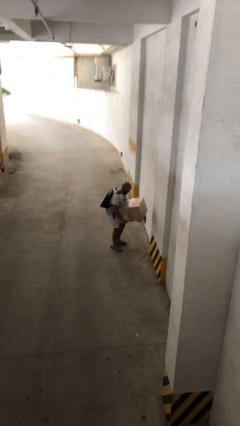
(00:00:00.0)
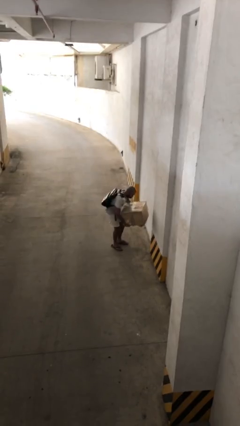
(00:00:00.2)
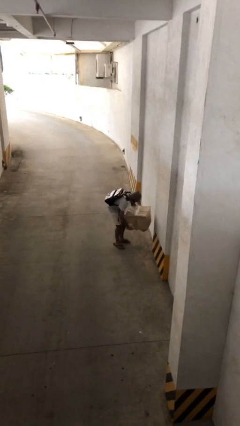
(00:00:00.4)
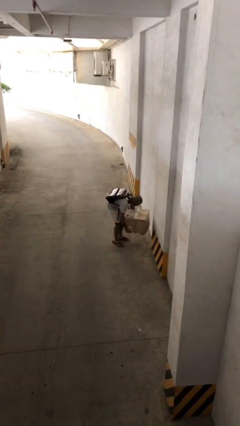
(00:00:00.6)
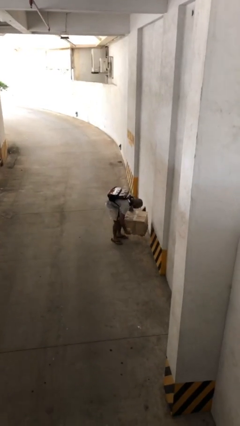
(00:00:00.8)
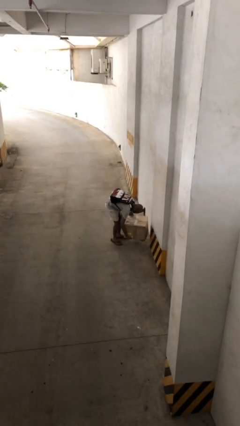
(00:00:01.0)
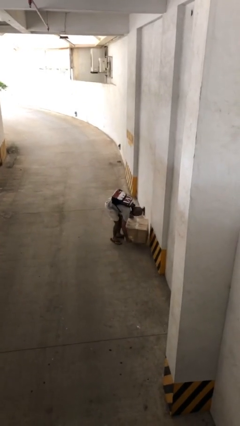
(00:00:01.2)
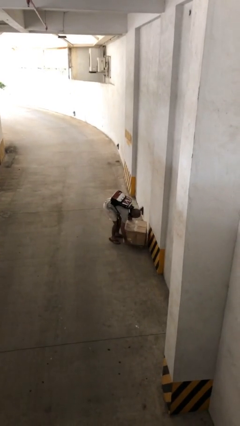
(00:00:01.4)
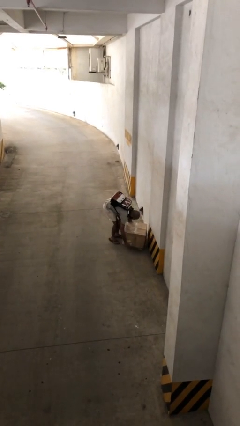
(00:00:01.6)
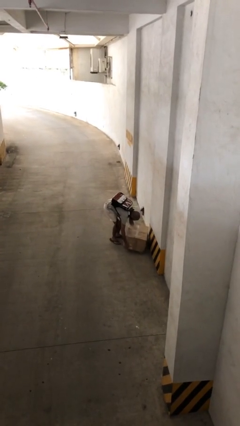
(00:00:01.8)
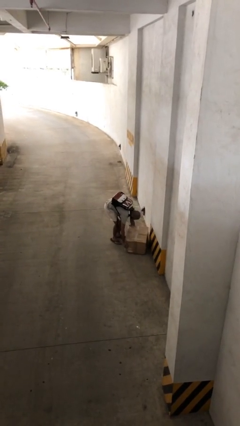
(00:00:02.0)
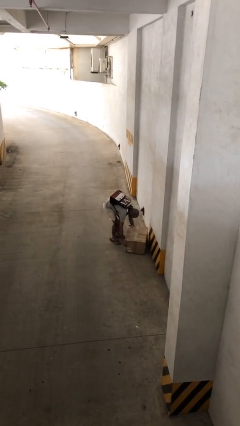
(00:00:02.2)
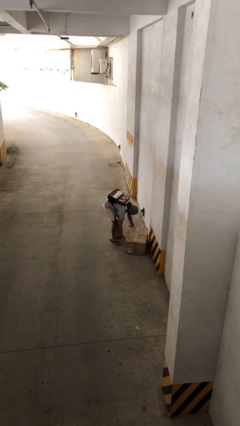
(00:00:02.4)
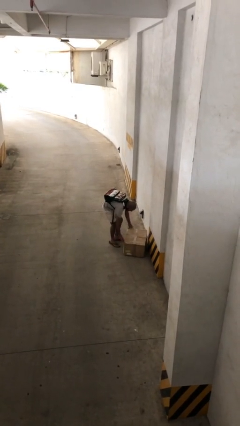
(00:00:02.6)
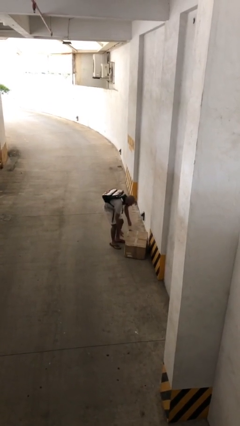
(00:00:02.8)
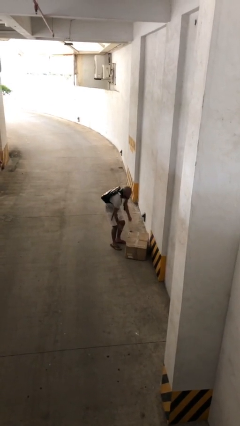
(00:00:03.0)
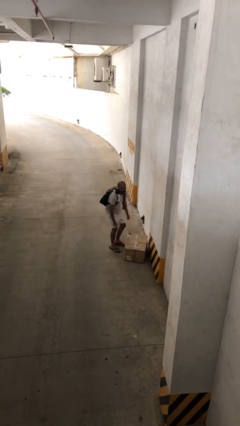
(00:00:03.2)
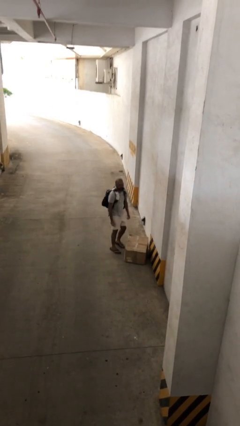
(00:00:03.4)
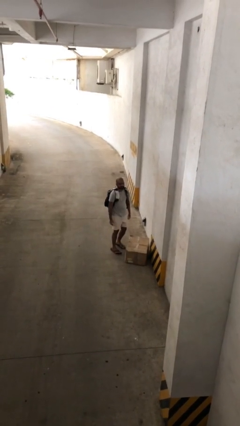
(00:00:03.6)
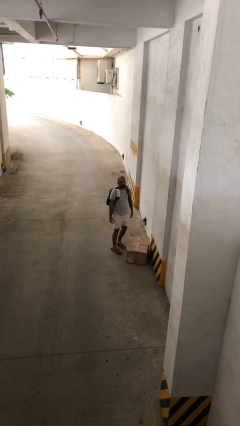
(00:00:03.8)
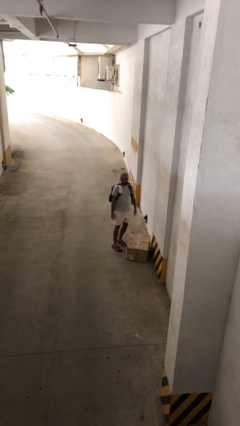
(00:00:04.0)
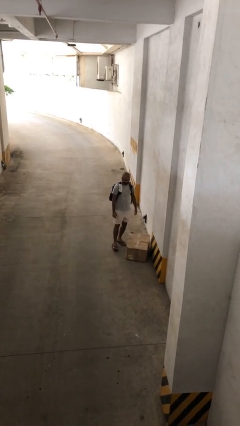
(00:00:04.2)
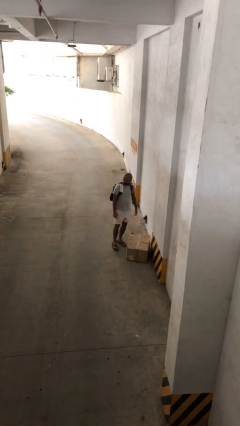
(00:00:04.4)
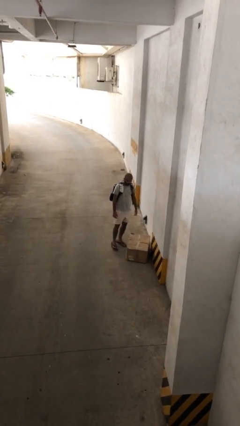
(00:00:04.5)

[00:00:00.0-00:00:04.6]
person puts down object on floor

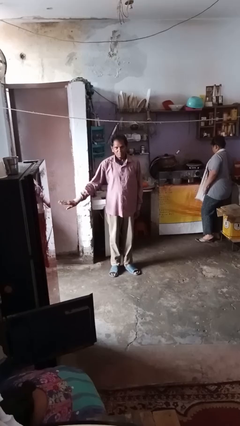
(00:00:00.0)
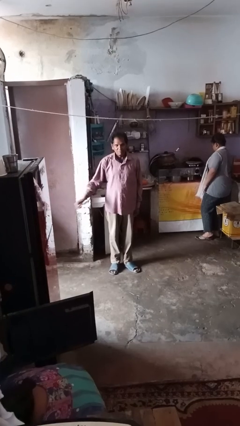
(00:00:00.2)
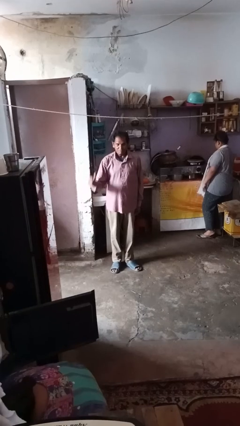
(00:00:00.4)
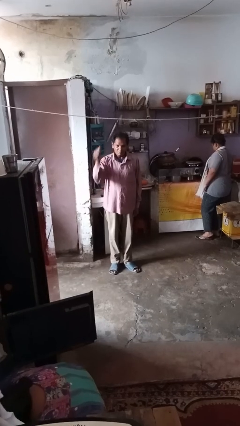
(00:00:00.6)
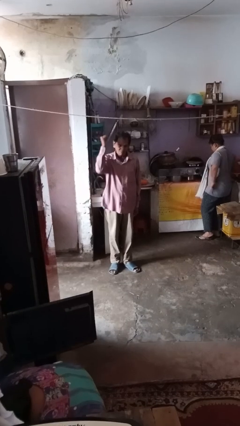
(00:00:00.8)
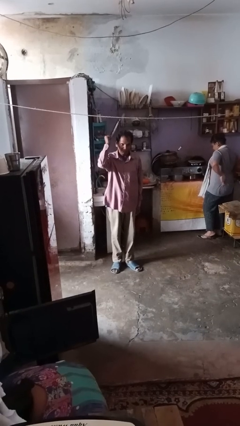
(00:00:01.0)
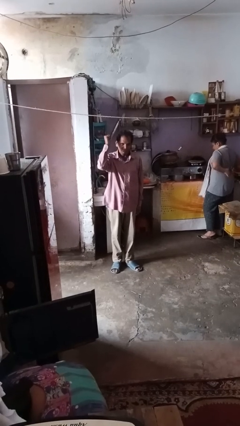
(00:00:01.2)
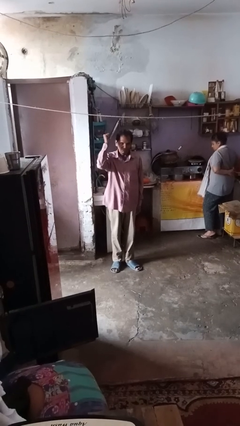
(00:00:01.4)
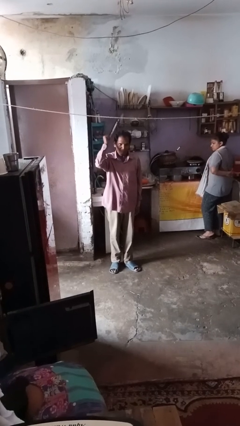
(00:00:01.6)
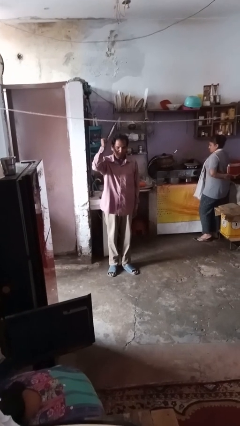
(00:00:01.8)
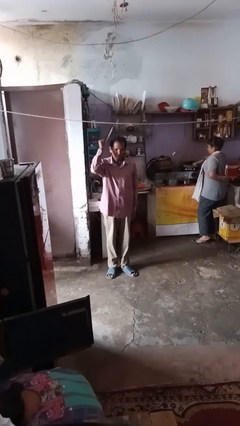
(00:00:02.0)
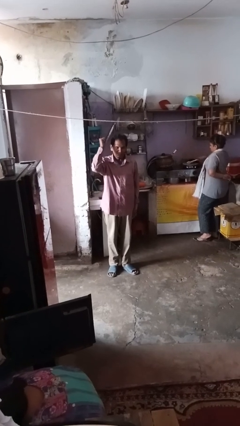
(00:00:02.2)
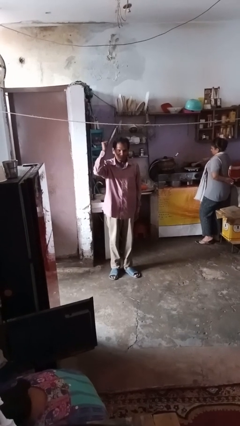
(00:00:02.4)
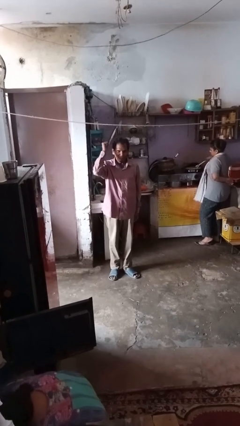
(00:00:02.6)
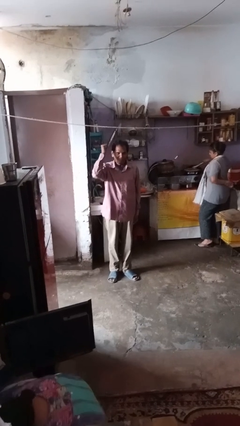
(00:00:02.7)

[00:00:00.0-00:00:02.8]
person gestures behind me

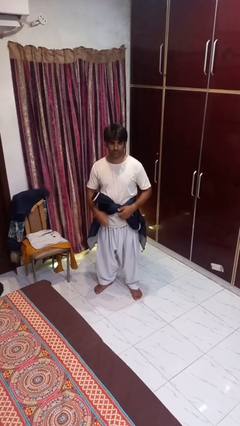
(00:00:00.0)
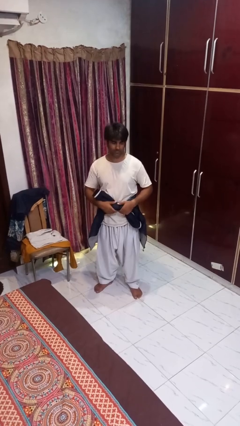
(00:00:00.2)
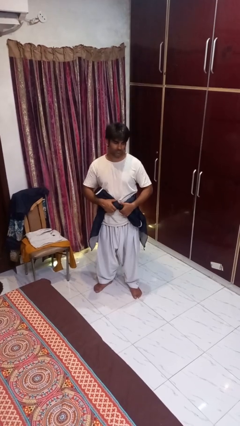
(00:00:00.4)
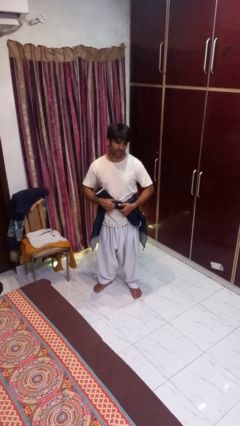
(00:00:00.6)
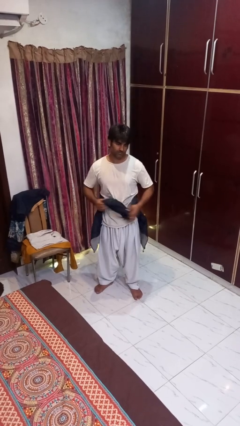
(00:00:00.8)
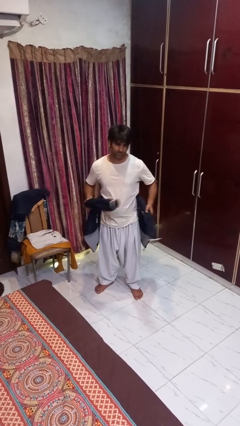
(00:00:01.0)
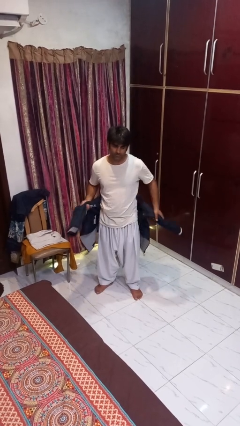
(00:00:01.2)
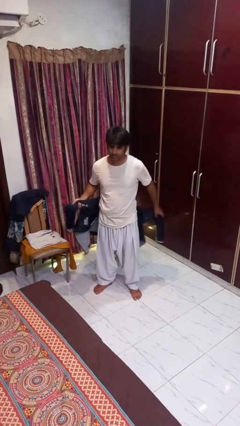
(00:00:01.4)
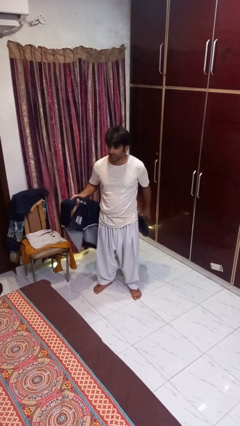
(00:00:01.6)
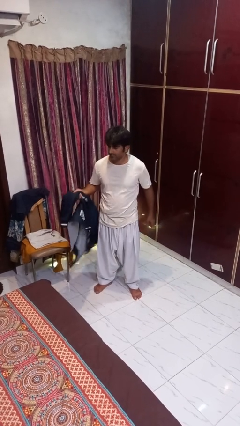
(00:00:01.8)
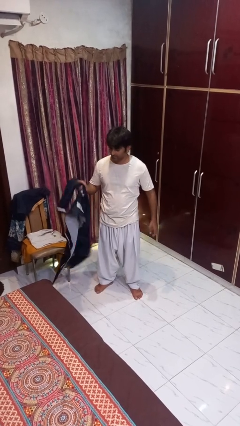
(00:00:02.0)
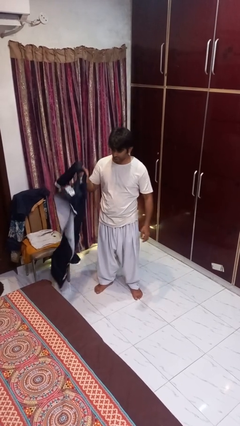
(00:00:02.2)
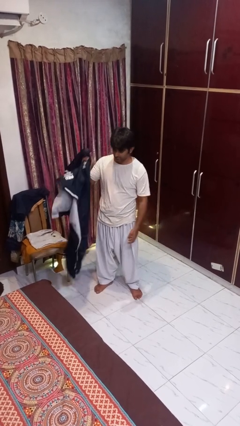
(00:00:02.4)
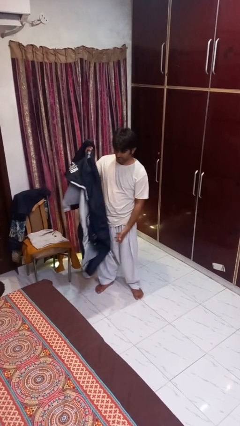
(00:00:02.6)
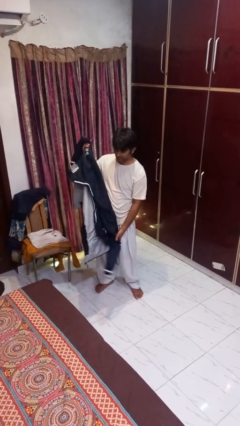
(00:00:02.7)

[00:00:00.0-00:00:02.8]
person unties jacket around waist

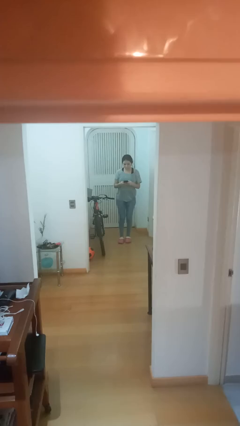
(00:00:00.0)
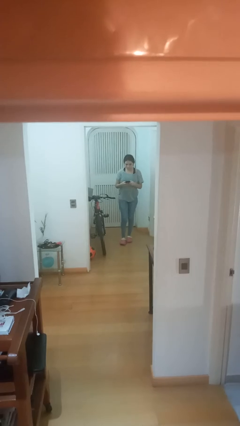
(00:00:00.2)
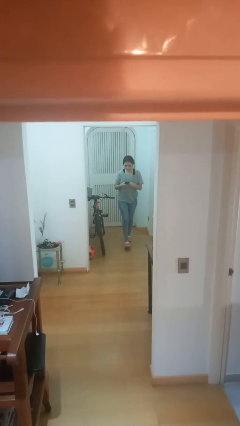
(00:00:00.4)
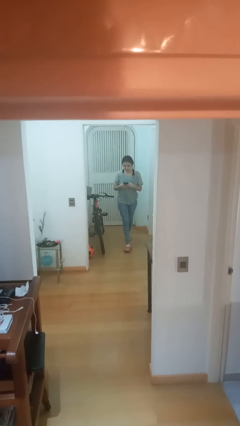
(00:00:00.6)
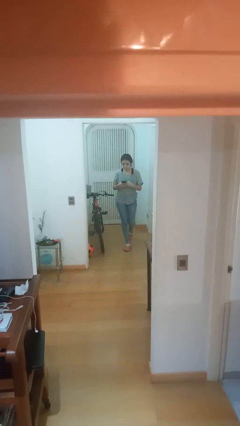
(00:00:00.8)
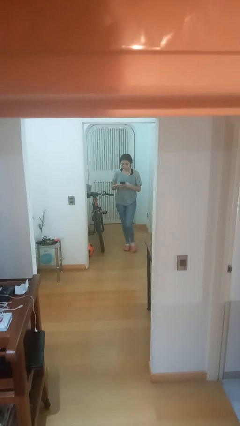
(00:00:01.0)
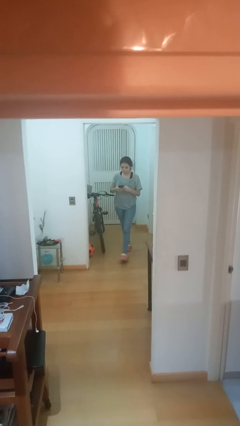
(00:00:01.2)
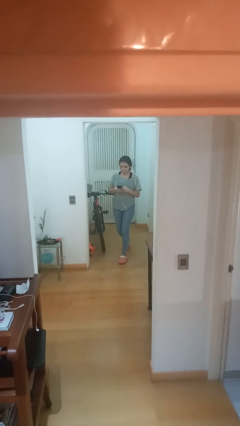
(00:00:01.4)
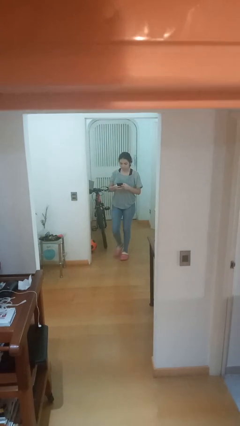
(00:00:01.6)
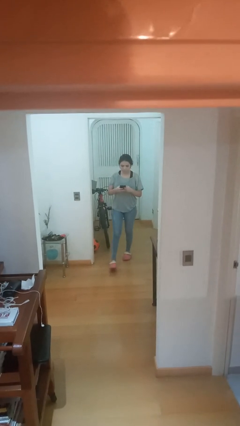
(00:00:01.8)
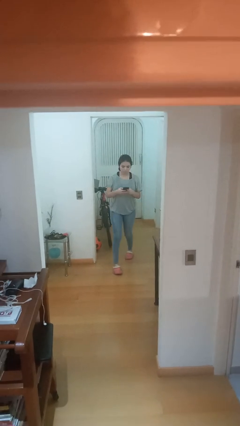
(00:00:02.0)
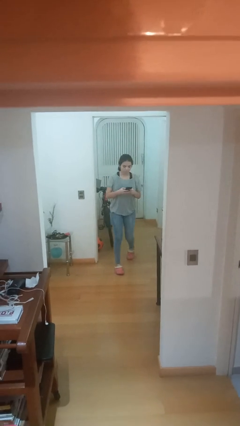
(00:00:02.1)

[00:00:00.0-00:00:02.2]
person enters scene through structure

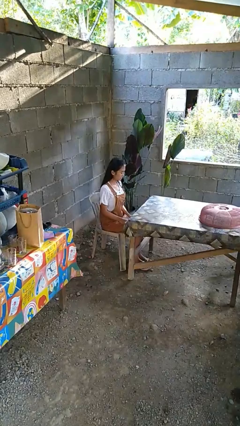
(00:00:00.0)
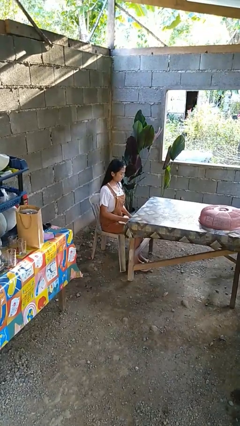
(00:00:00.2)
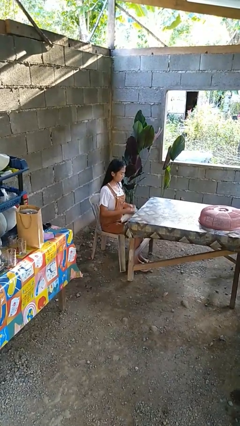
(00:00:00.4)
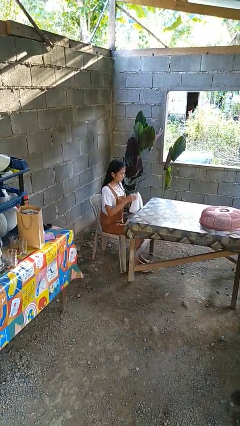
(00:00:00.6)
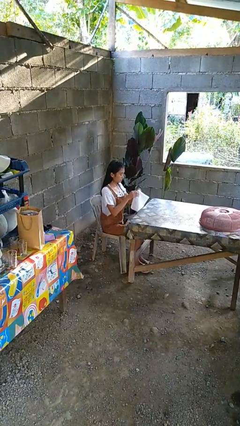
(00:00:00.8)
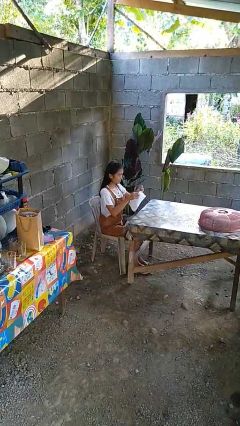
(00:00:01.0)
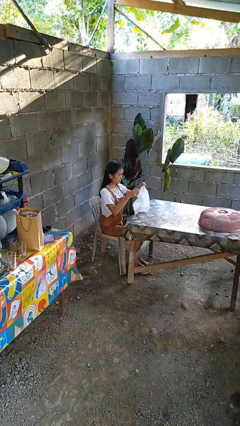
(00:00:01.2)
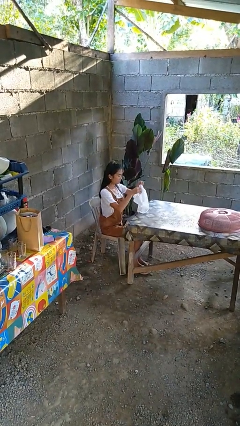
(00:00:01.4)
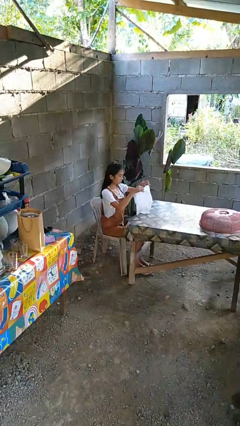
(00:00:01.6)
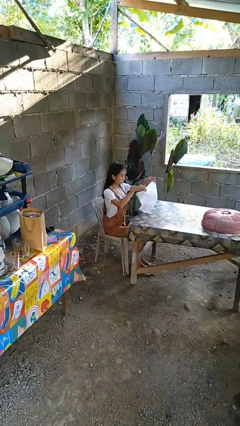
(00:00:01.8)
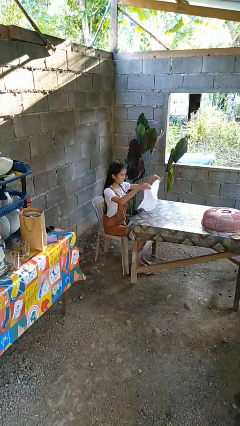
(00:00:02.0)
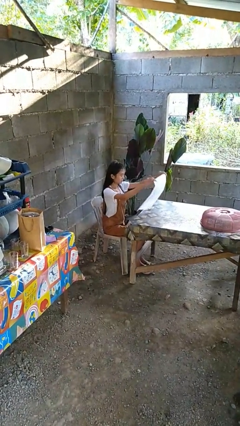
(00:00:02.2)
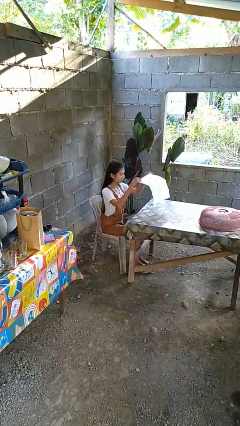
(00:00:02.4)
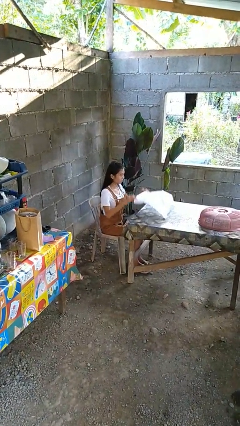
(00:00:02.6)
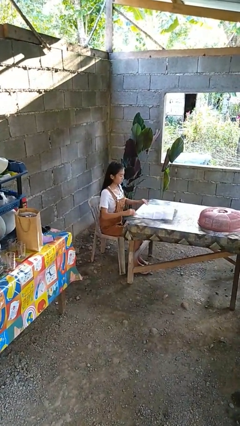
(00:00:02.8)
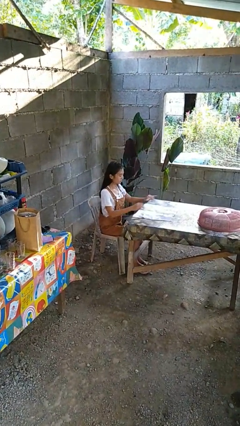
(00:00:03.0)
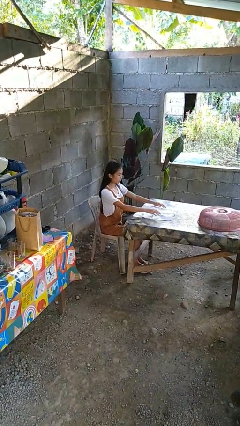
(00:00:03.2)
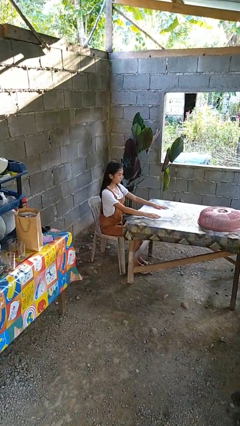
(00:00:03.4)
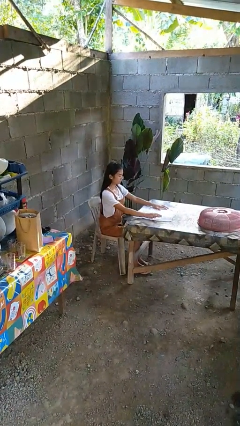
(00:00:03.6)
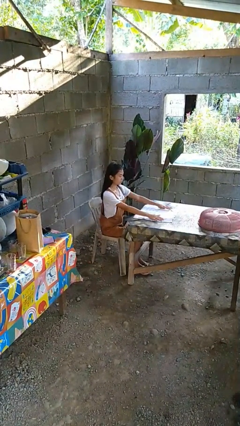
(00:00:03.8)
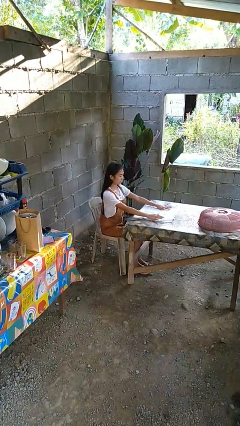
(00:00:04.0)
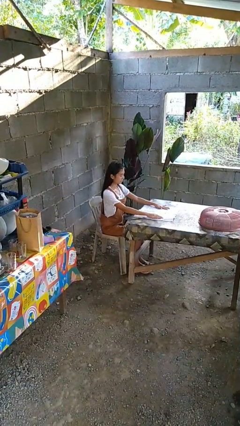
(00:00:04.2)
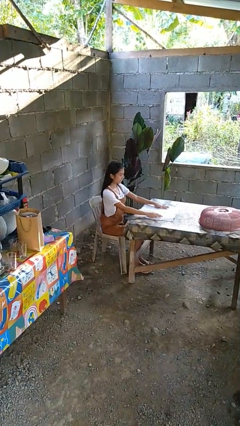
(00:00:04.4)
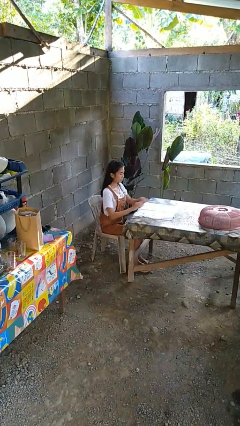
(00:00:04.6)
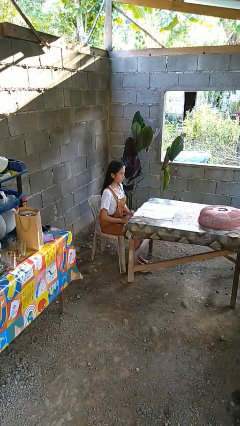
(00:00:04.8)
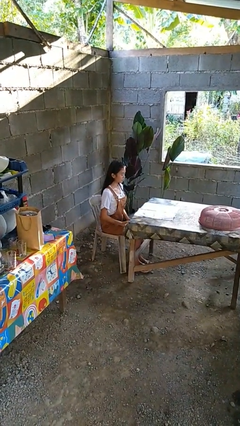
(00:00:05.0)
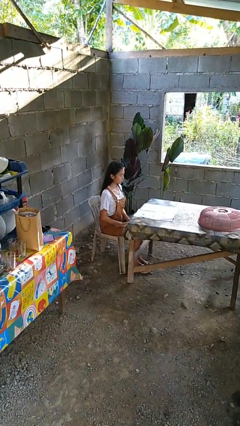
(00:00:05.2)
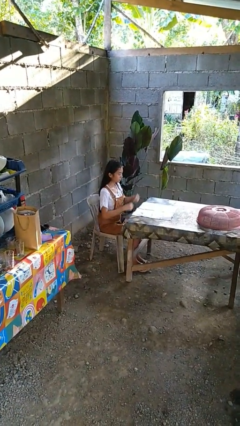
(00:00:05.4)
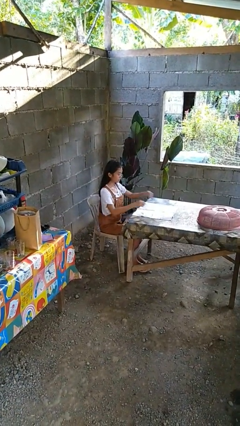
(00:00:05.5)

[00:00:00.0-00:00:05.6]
person spreads tablecloth
